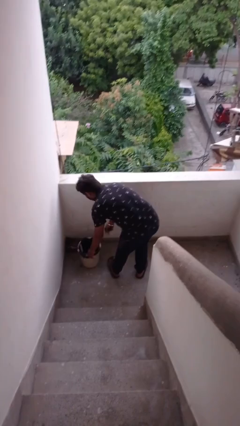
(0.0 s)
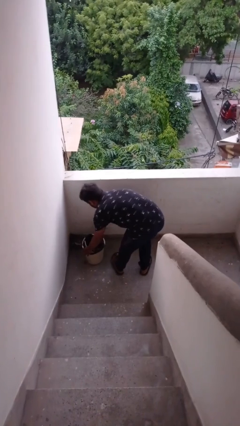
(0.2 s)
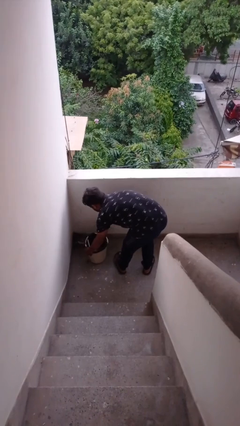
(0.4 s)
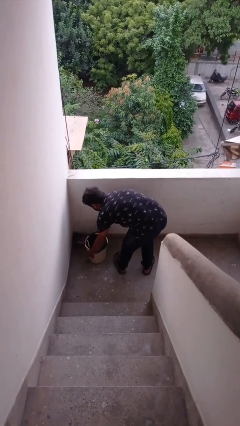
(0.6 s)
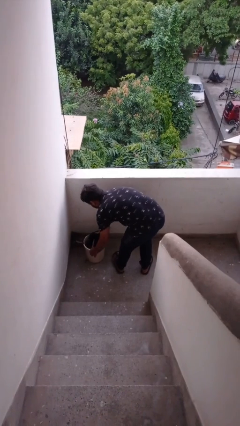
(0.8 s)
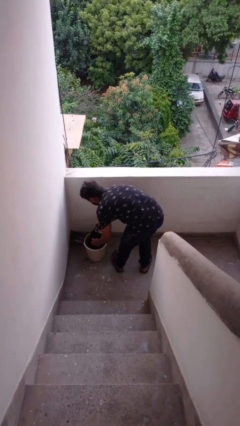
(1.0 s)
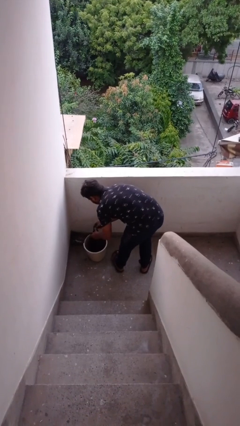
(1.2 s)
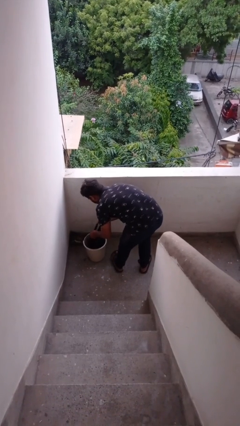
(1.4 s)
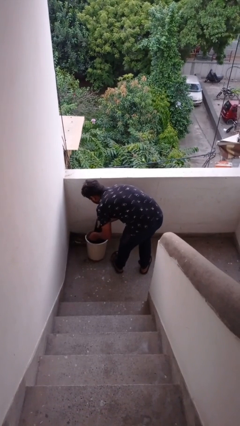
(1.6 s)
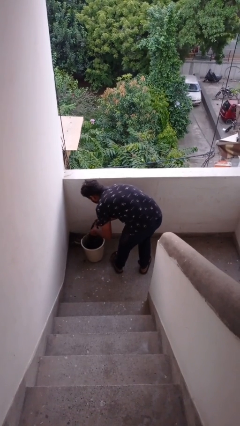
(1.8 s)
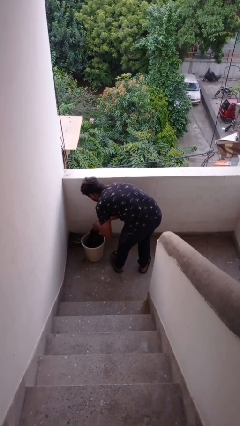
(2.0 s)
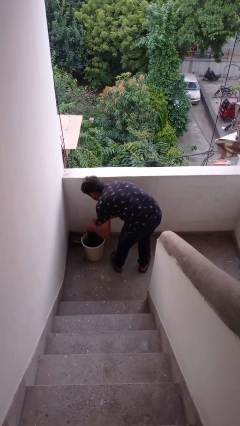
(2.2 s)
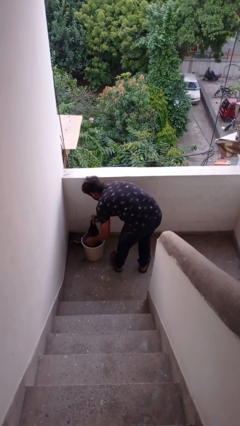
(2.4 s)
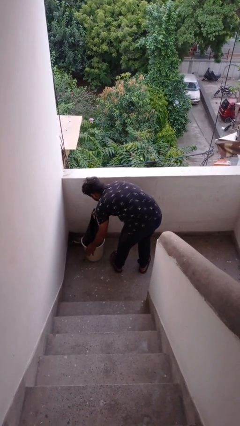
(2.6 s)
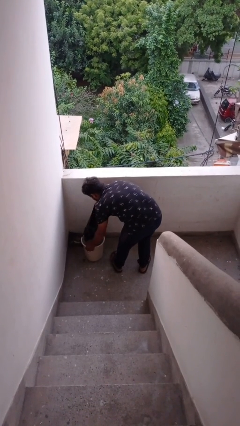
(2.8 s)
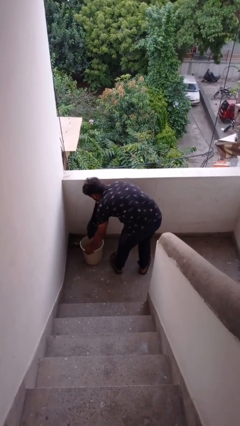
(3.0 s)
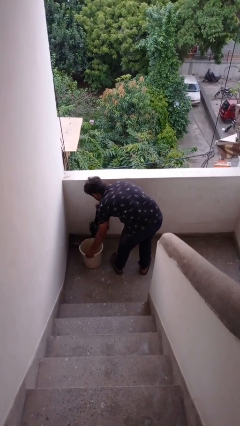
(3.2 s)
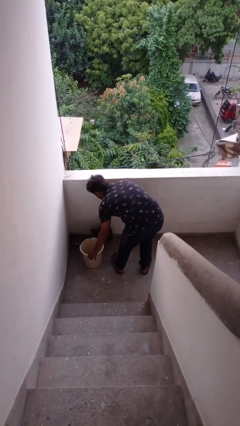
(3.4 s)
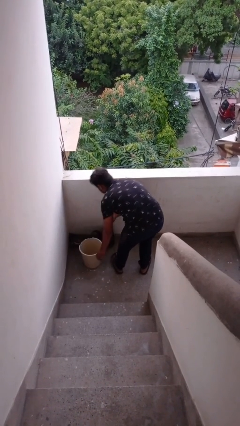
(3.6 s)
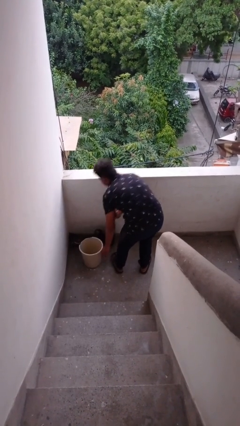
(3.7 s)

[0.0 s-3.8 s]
person removes trashbag from trashcan

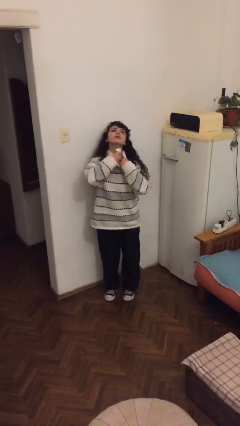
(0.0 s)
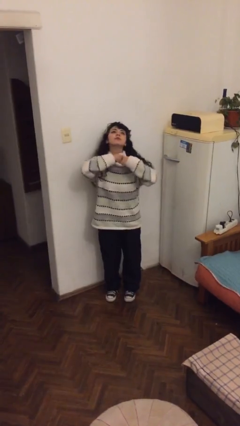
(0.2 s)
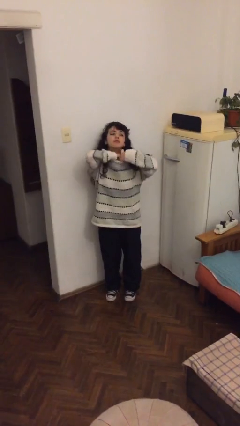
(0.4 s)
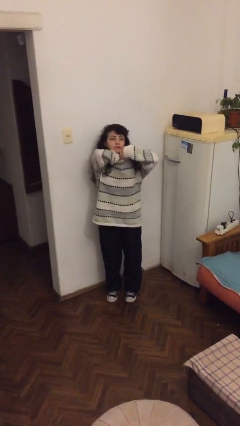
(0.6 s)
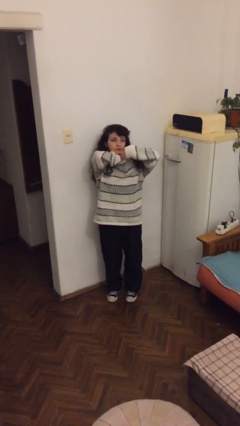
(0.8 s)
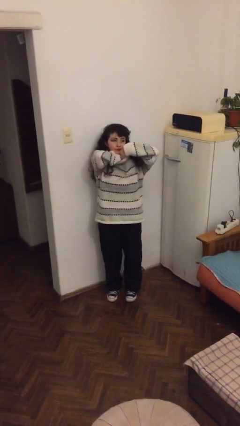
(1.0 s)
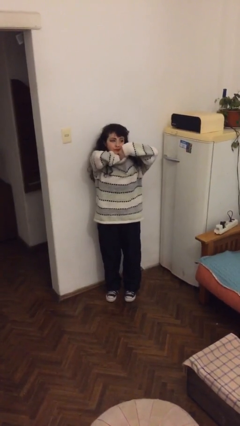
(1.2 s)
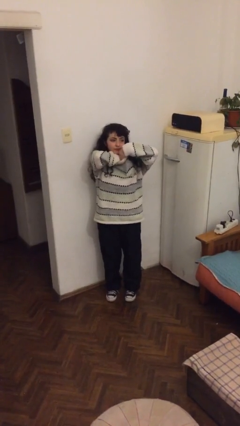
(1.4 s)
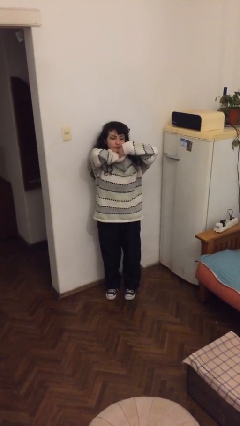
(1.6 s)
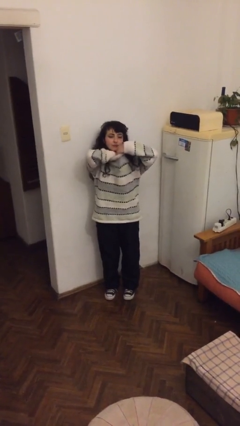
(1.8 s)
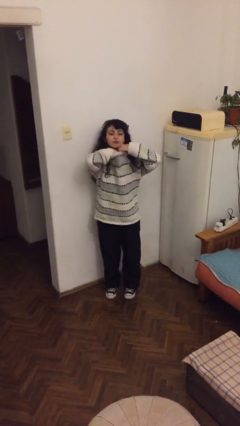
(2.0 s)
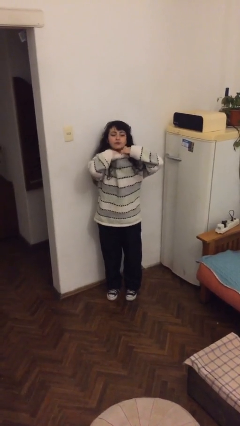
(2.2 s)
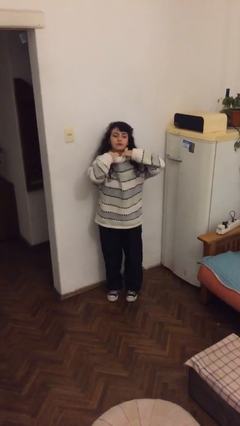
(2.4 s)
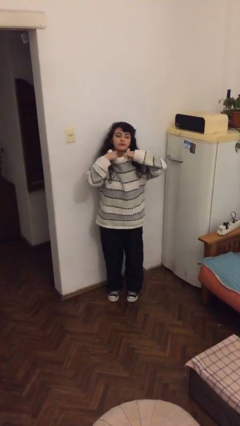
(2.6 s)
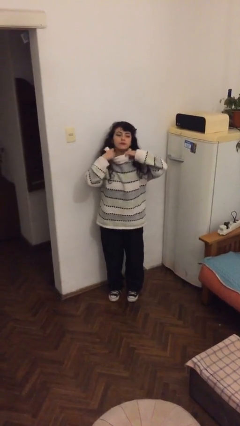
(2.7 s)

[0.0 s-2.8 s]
person applies deodorant

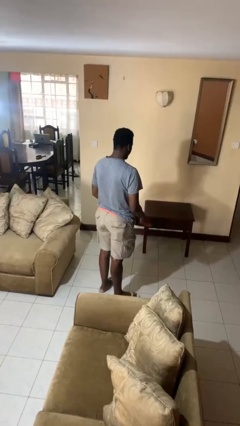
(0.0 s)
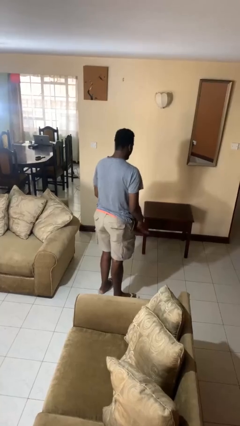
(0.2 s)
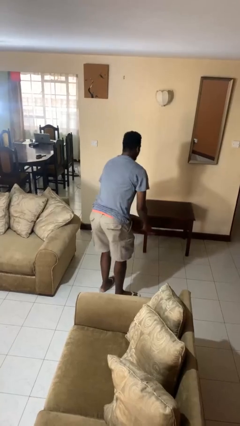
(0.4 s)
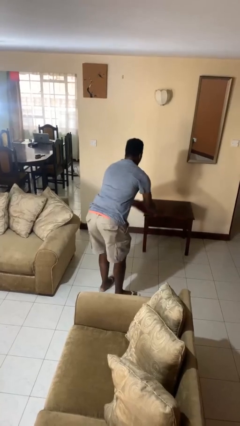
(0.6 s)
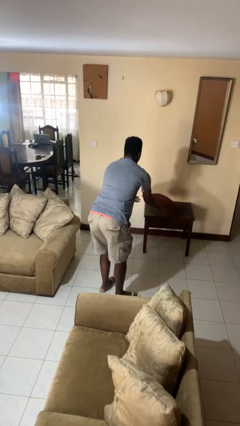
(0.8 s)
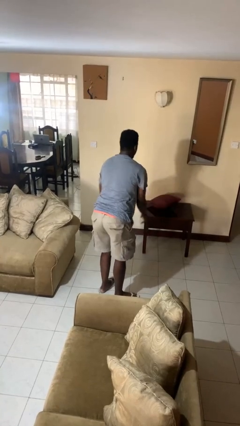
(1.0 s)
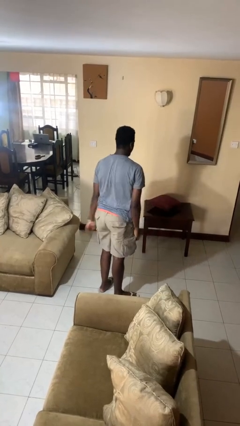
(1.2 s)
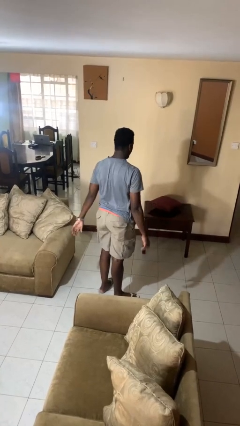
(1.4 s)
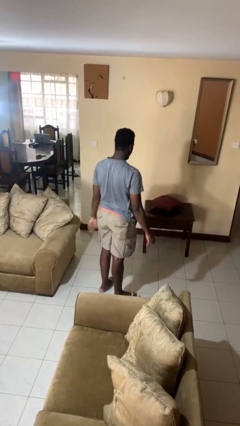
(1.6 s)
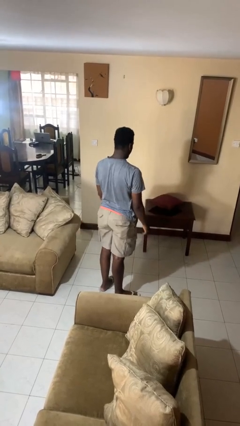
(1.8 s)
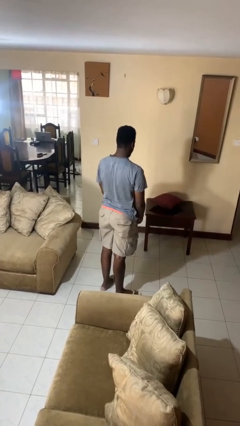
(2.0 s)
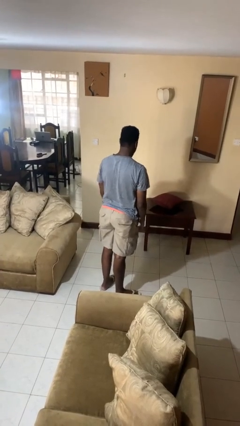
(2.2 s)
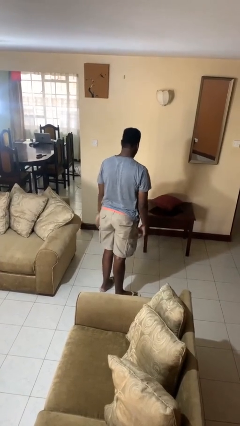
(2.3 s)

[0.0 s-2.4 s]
person throws object on table

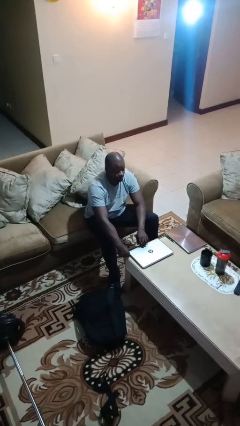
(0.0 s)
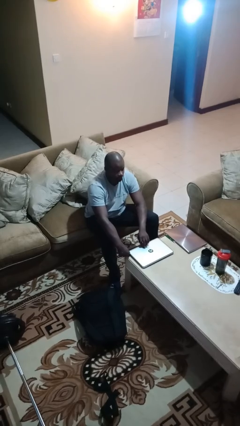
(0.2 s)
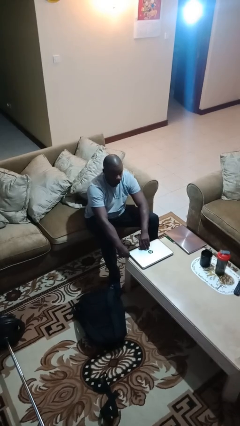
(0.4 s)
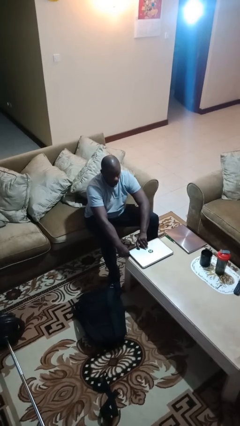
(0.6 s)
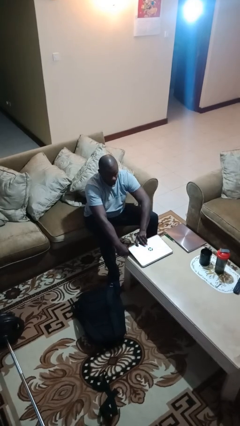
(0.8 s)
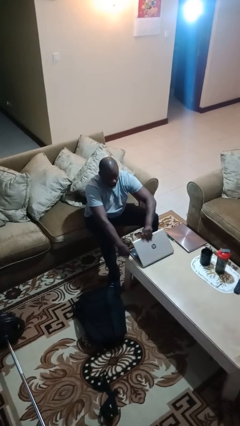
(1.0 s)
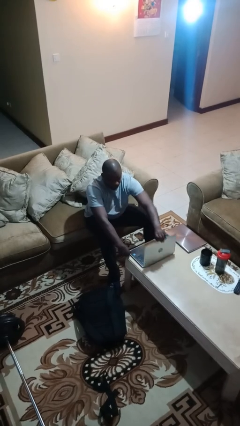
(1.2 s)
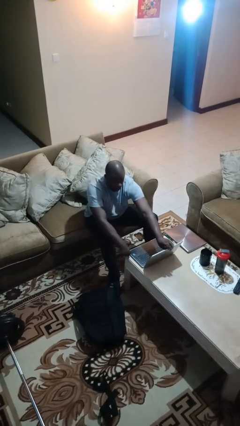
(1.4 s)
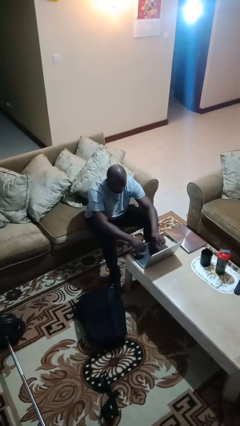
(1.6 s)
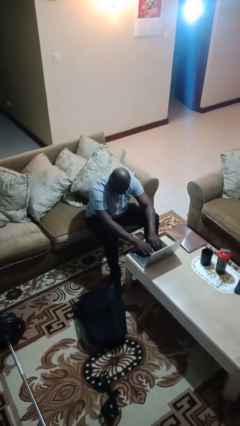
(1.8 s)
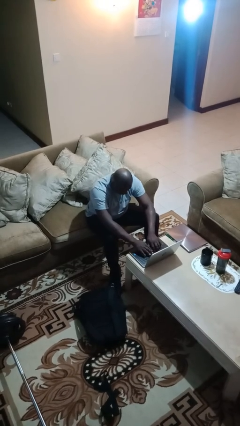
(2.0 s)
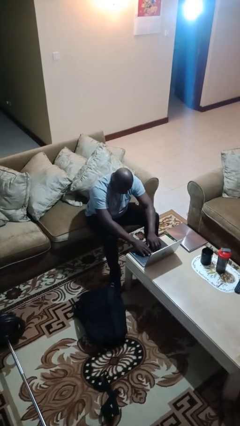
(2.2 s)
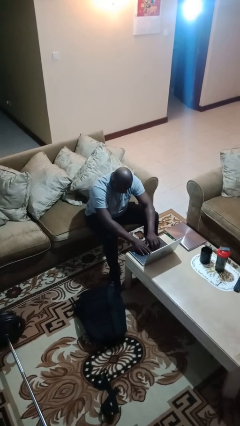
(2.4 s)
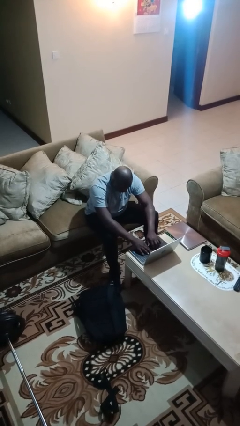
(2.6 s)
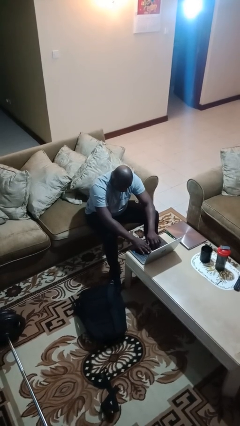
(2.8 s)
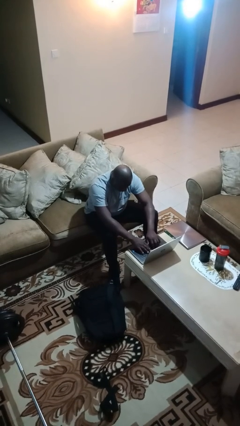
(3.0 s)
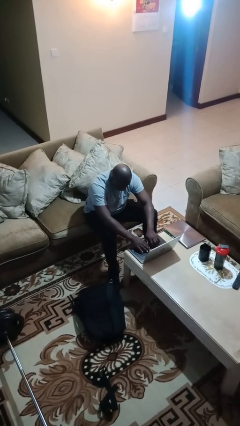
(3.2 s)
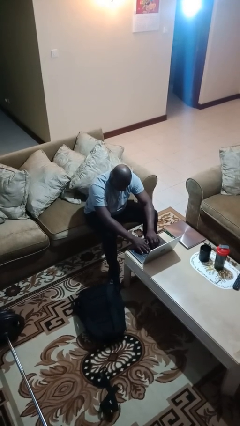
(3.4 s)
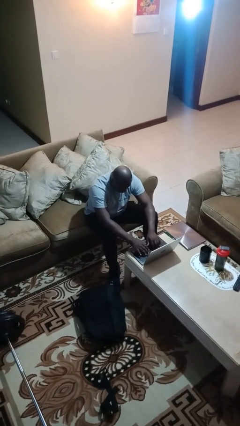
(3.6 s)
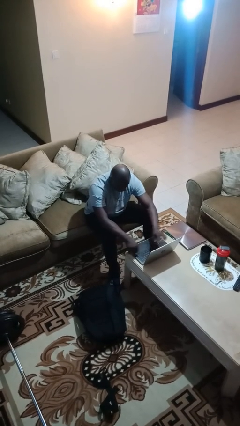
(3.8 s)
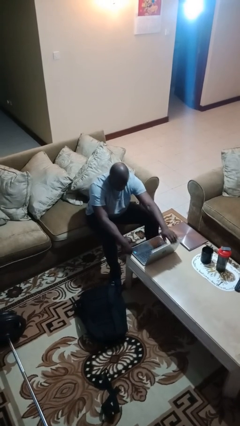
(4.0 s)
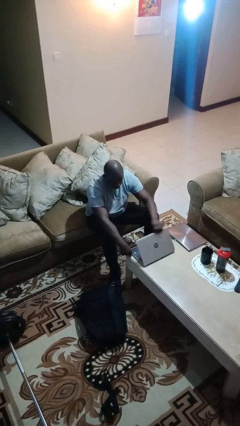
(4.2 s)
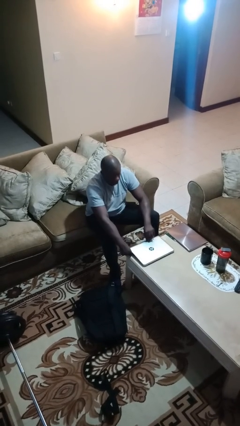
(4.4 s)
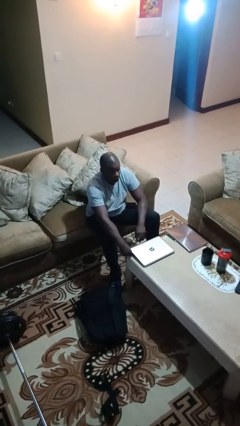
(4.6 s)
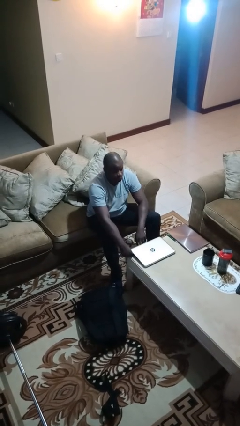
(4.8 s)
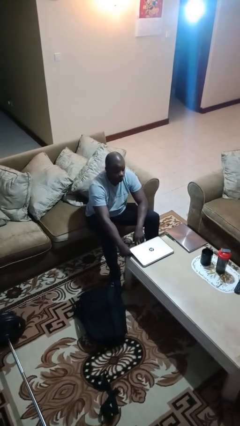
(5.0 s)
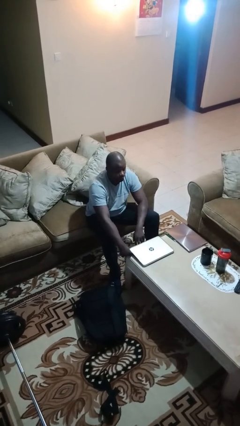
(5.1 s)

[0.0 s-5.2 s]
person interacts with laptop

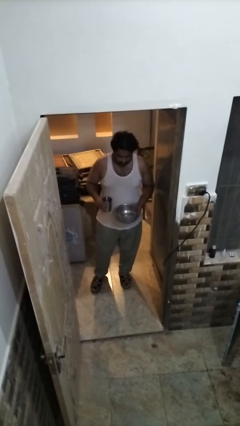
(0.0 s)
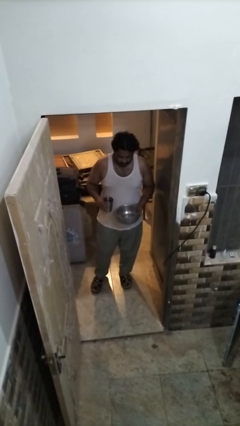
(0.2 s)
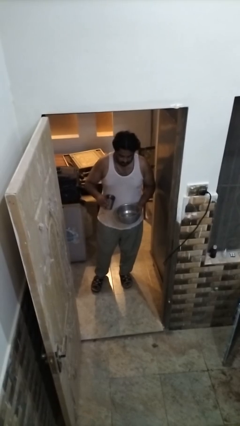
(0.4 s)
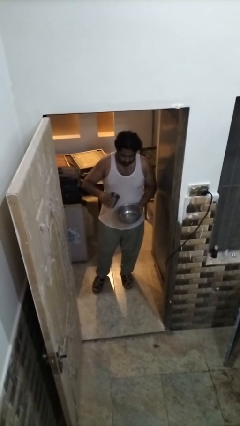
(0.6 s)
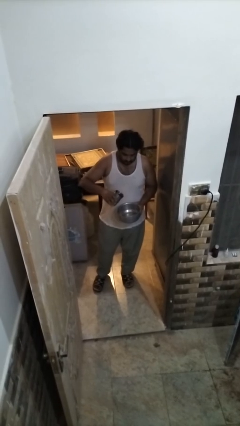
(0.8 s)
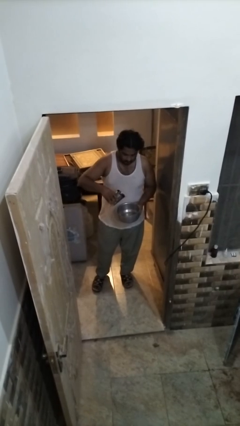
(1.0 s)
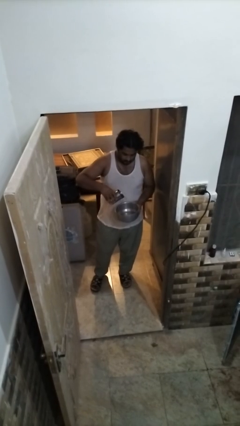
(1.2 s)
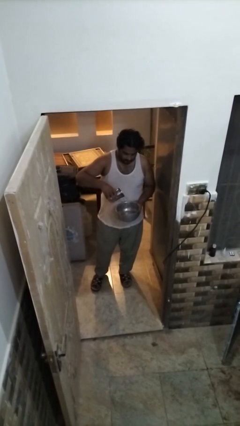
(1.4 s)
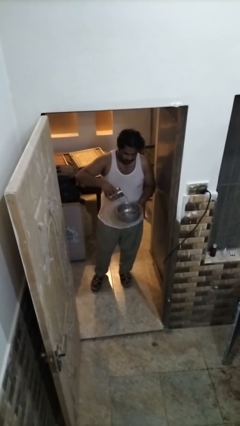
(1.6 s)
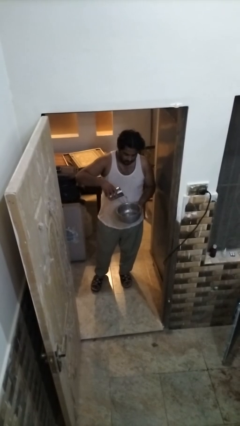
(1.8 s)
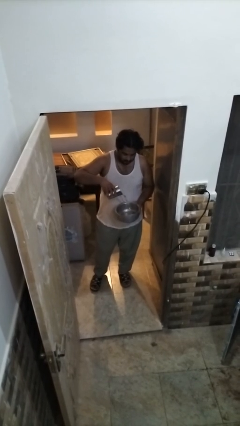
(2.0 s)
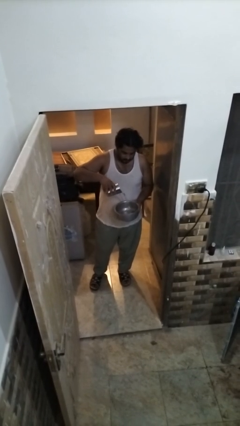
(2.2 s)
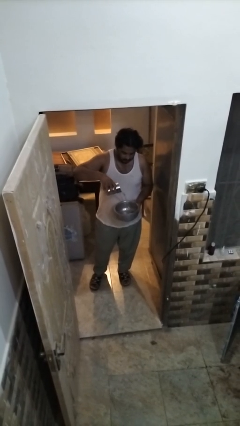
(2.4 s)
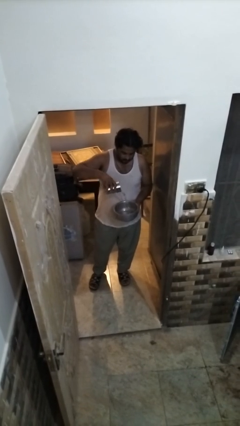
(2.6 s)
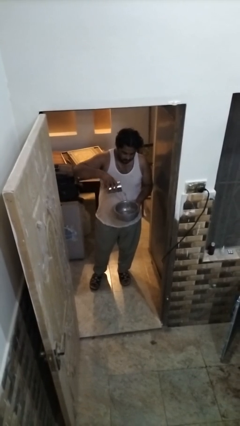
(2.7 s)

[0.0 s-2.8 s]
person pours into bowl

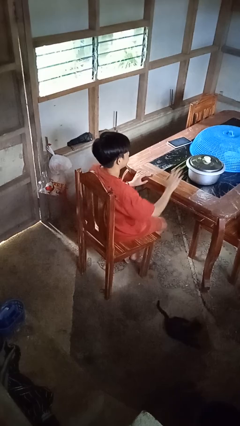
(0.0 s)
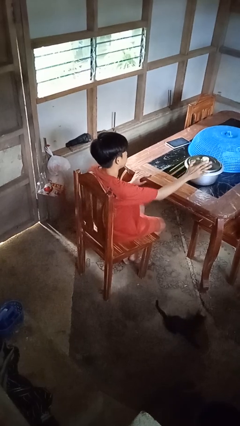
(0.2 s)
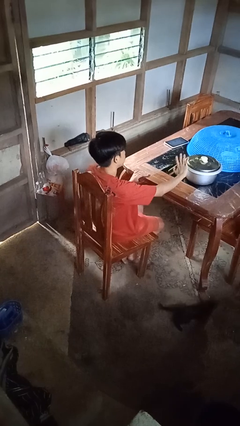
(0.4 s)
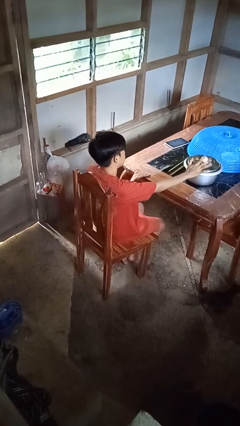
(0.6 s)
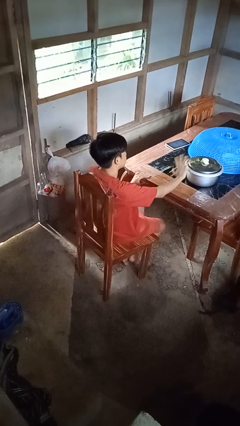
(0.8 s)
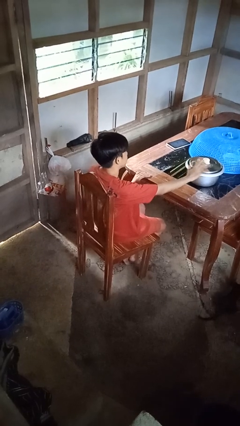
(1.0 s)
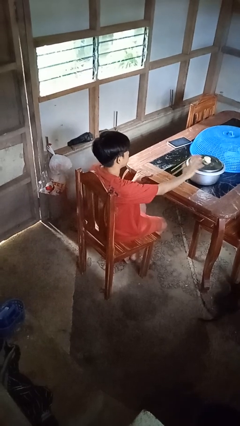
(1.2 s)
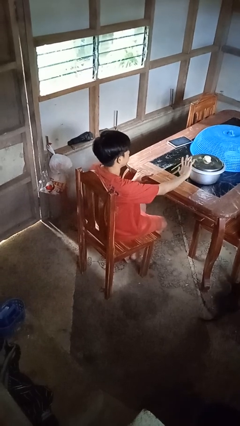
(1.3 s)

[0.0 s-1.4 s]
person waves hand over object
